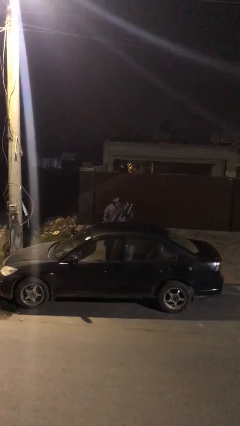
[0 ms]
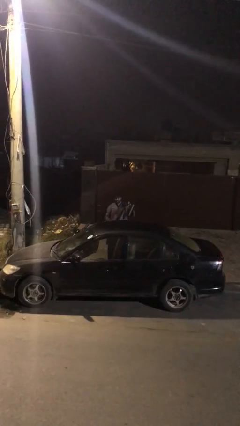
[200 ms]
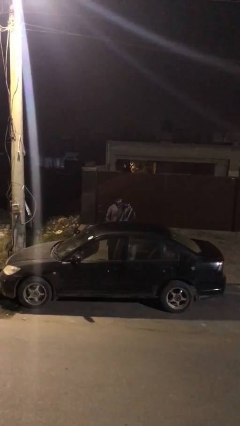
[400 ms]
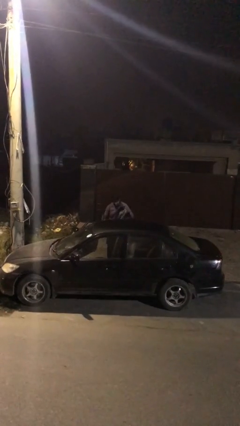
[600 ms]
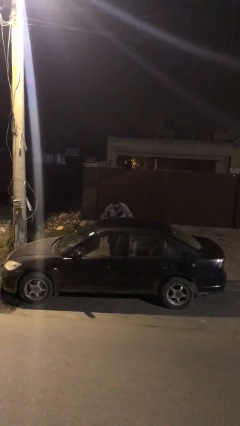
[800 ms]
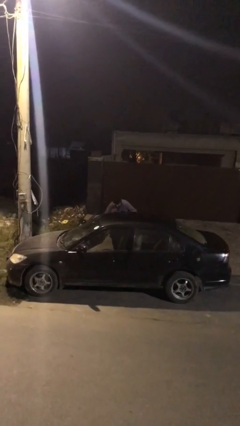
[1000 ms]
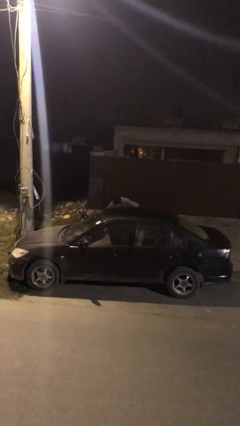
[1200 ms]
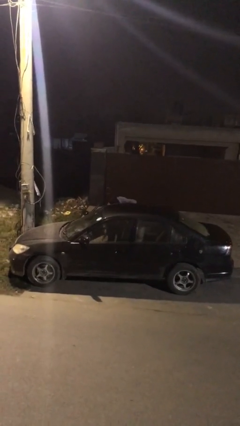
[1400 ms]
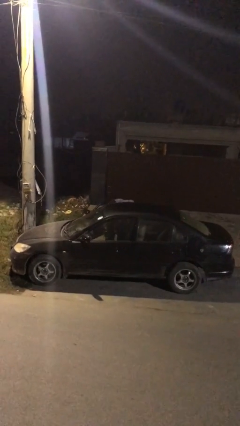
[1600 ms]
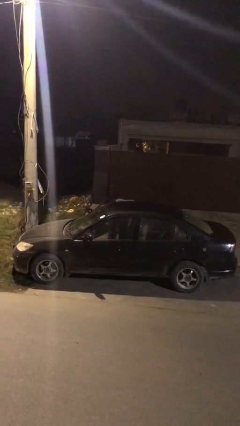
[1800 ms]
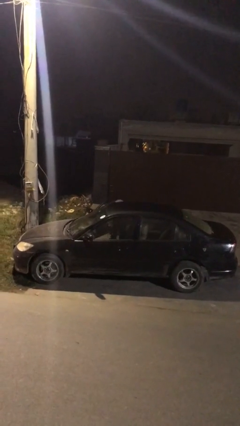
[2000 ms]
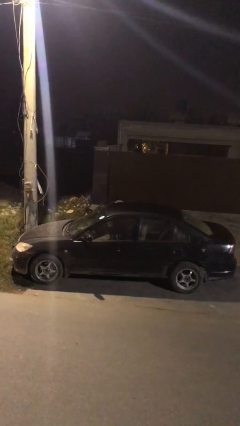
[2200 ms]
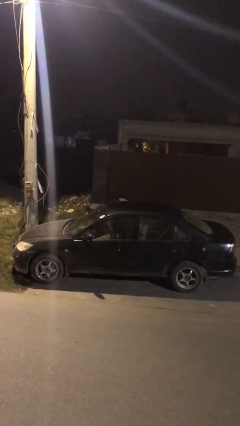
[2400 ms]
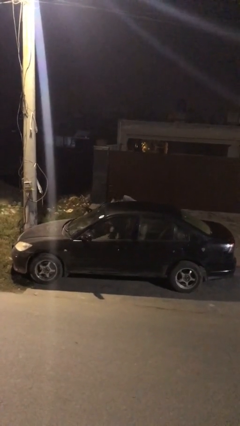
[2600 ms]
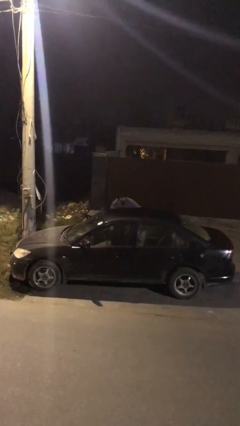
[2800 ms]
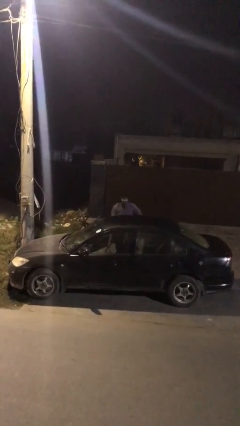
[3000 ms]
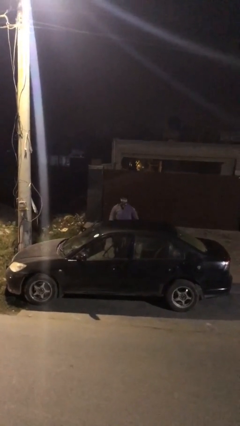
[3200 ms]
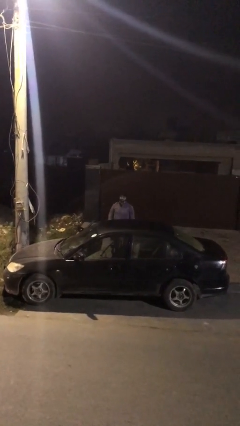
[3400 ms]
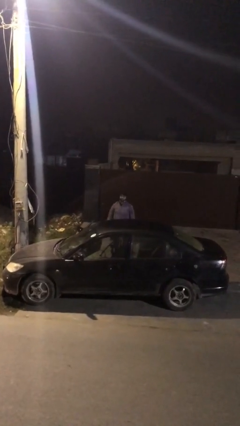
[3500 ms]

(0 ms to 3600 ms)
person loads car

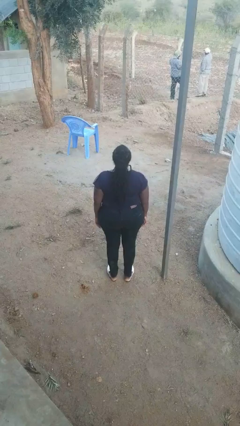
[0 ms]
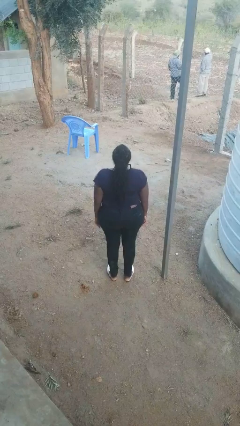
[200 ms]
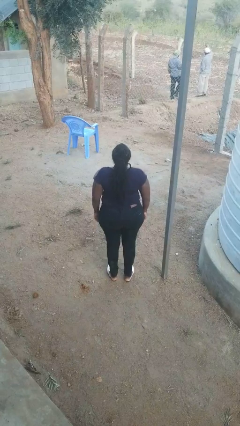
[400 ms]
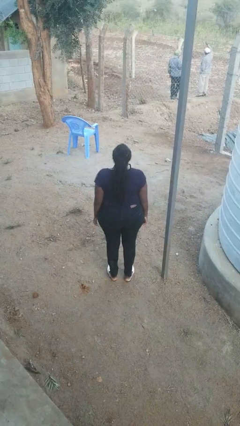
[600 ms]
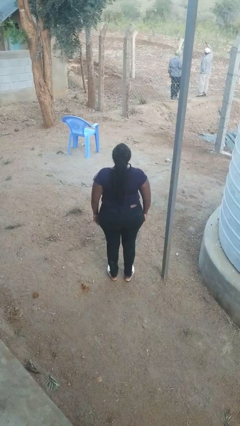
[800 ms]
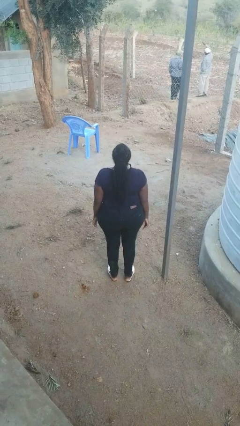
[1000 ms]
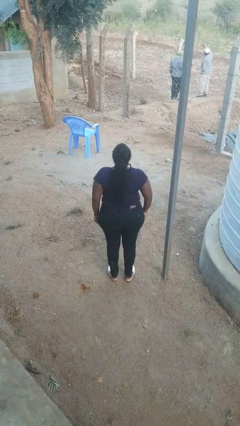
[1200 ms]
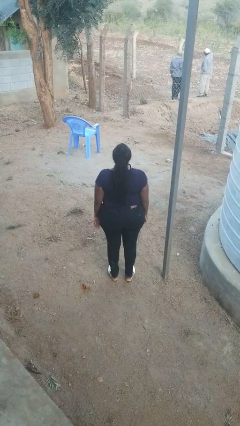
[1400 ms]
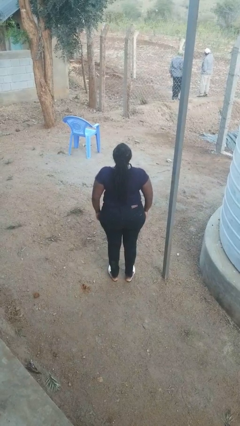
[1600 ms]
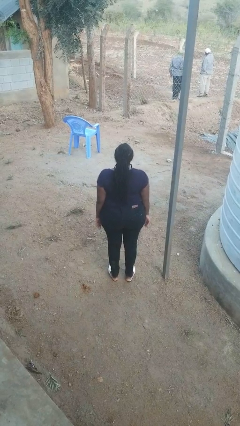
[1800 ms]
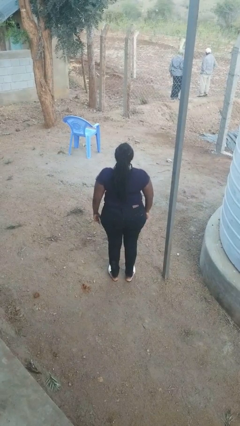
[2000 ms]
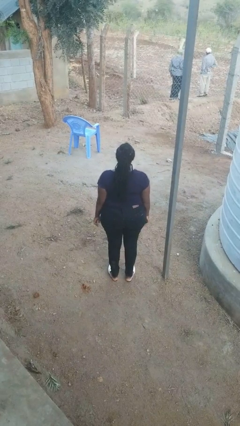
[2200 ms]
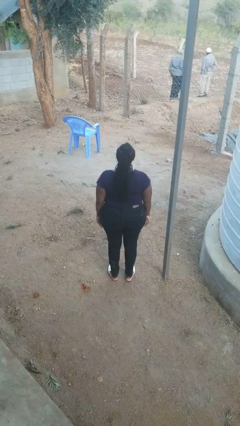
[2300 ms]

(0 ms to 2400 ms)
person shrugs

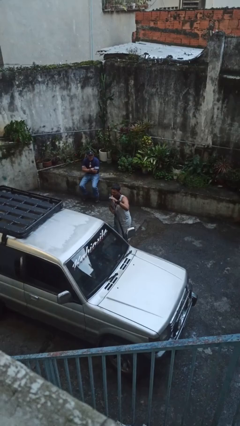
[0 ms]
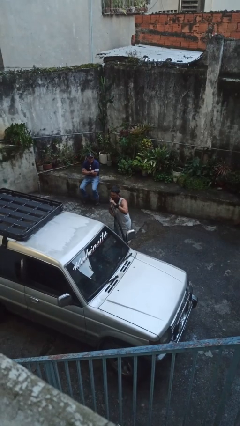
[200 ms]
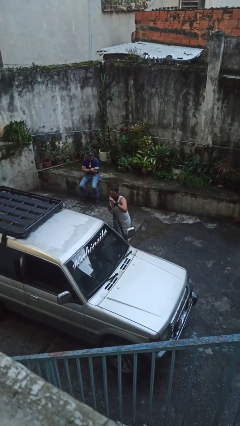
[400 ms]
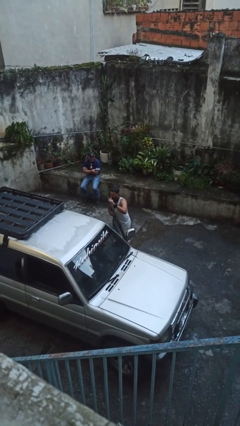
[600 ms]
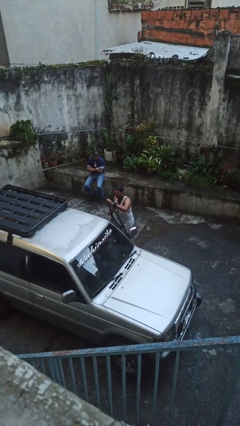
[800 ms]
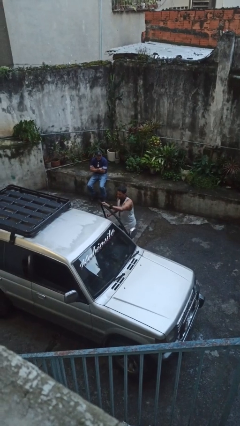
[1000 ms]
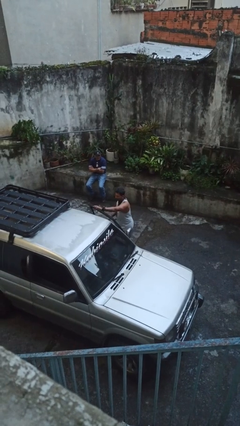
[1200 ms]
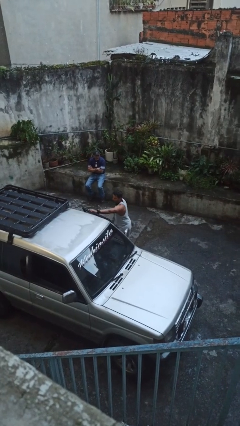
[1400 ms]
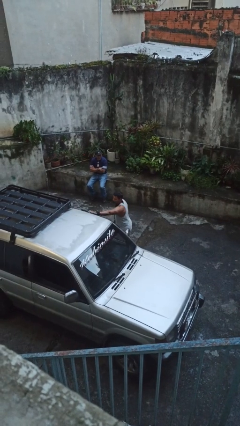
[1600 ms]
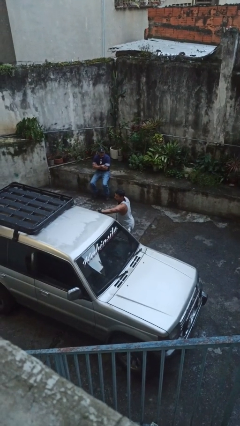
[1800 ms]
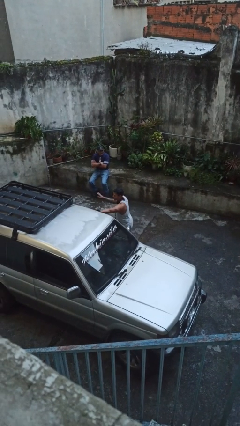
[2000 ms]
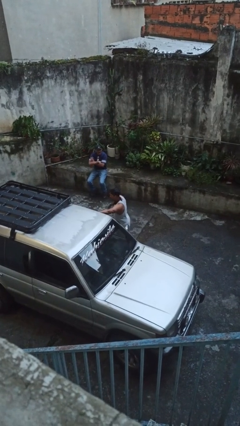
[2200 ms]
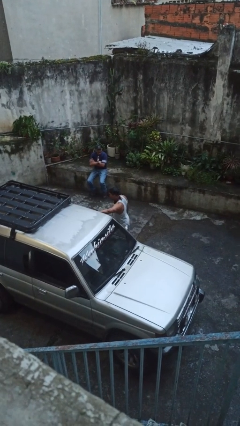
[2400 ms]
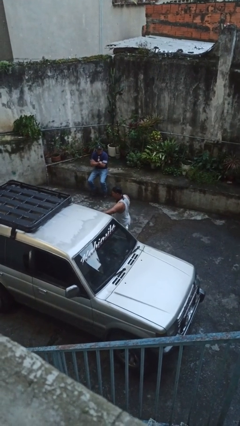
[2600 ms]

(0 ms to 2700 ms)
person closes car door

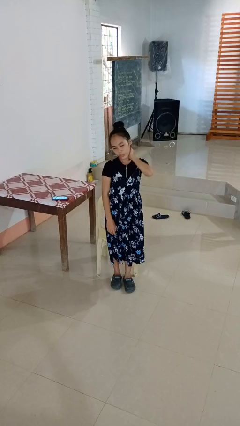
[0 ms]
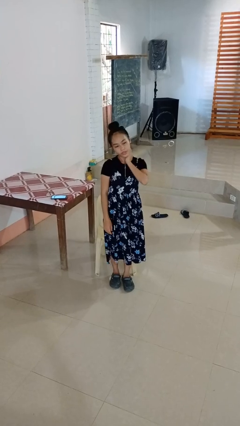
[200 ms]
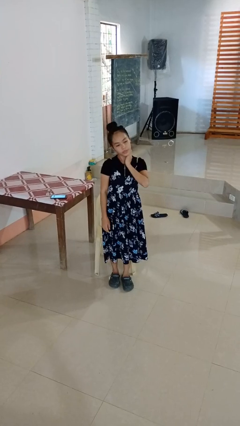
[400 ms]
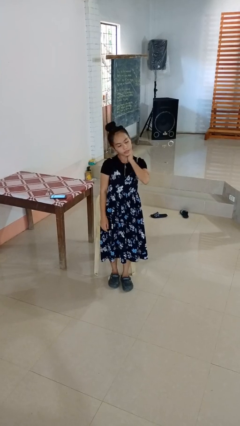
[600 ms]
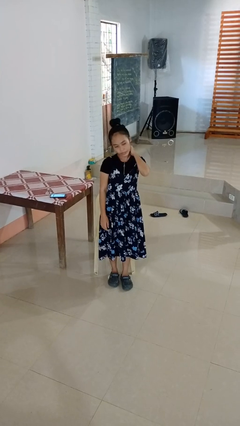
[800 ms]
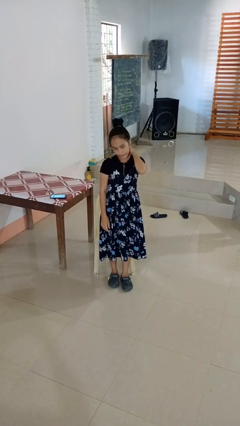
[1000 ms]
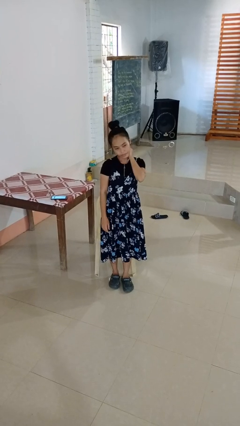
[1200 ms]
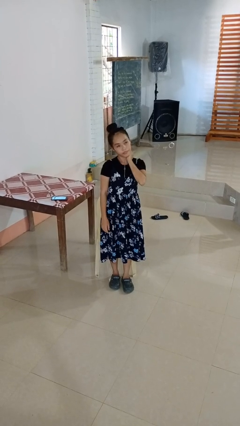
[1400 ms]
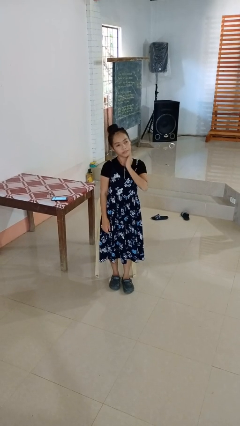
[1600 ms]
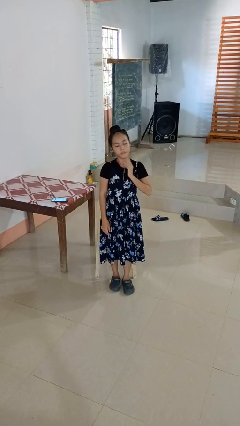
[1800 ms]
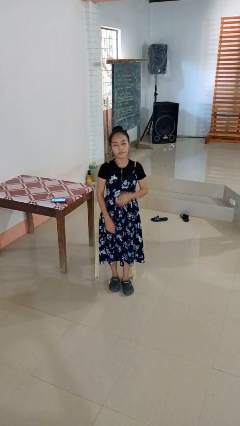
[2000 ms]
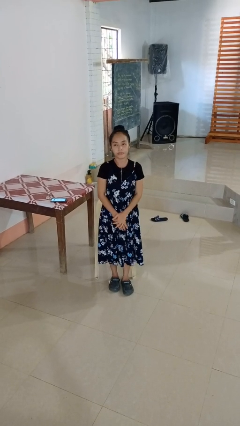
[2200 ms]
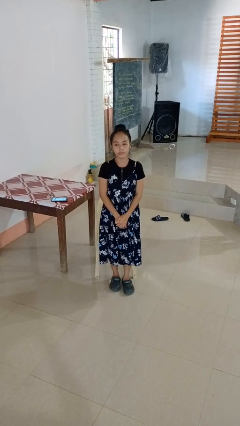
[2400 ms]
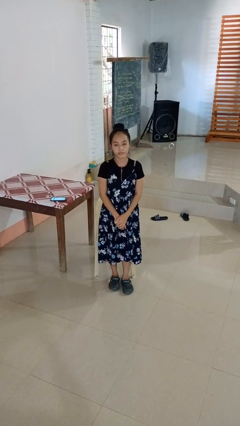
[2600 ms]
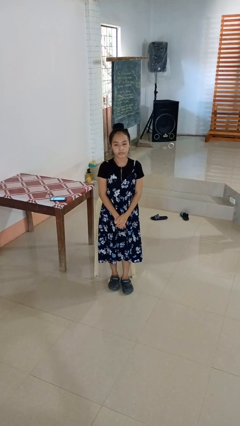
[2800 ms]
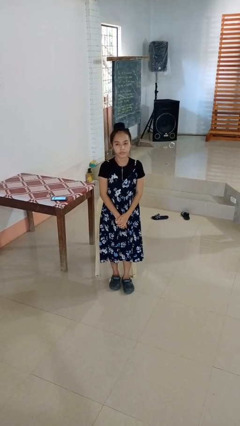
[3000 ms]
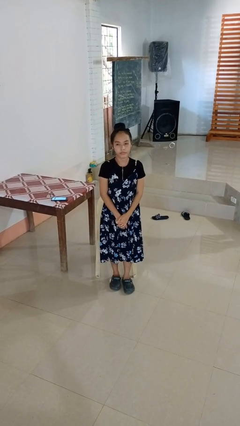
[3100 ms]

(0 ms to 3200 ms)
person rubs neck

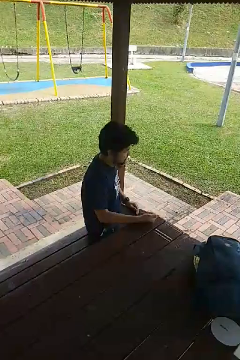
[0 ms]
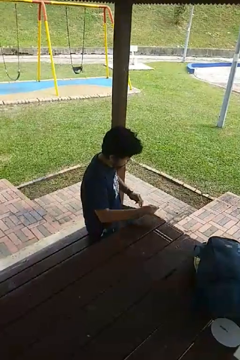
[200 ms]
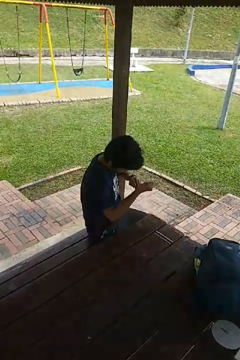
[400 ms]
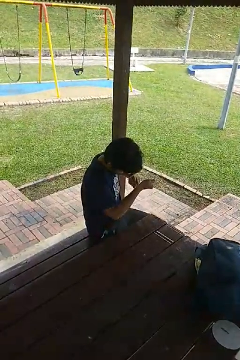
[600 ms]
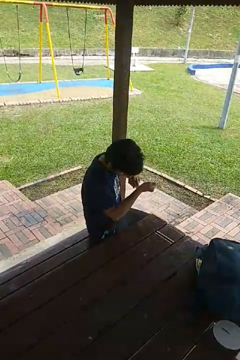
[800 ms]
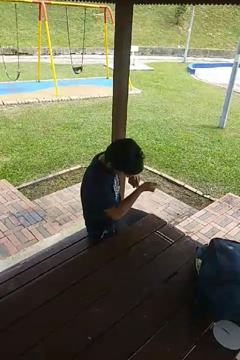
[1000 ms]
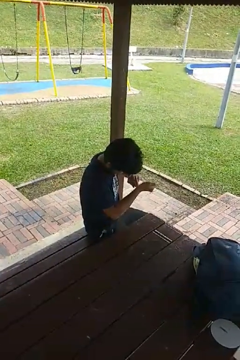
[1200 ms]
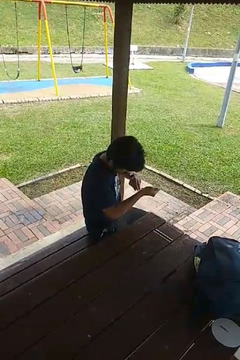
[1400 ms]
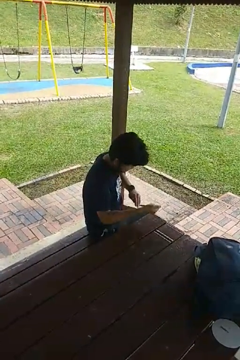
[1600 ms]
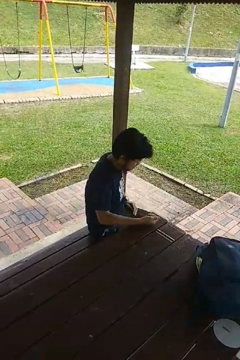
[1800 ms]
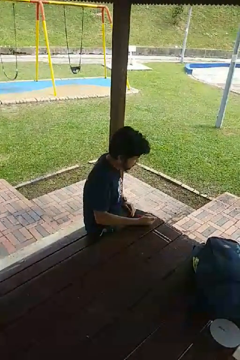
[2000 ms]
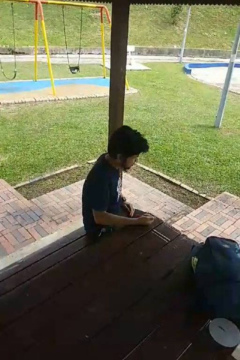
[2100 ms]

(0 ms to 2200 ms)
person paints fingernails

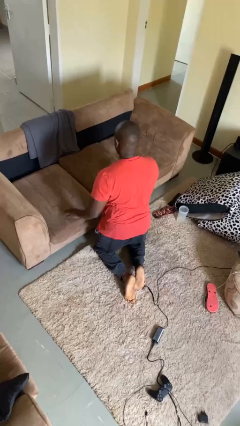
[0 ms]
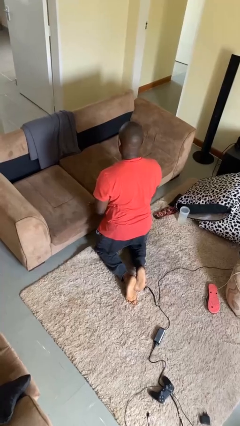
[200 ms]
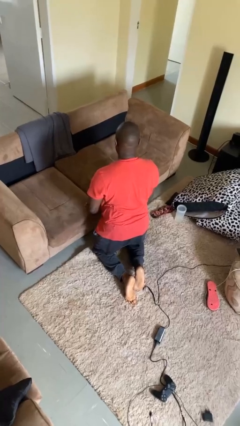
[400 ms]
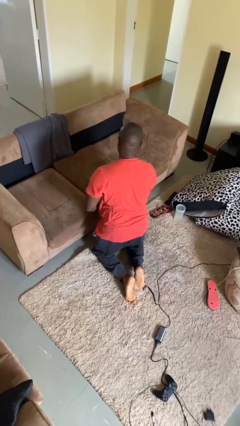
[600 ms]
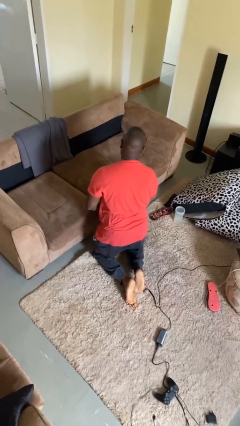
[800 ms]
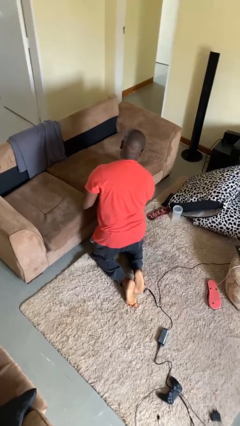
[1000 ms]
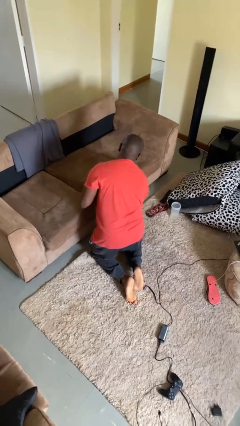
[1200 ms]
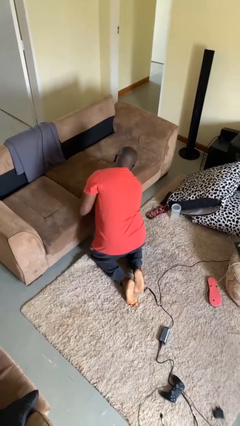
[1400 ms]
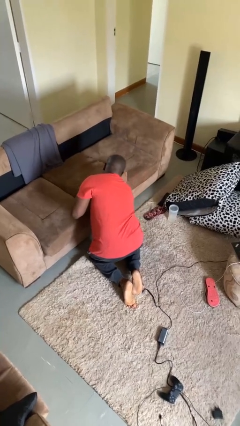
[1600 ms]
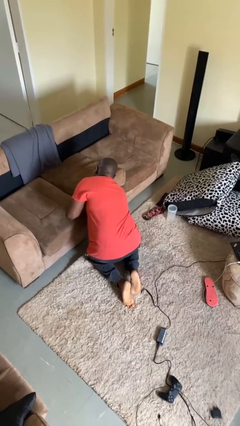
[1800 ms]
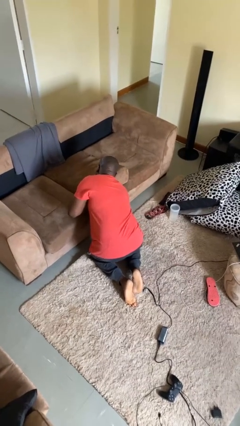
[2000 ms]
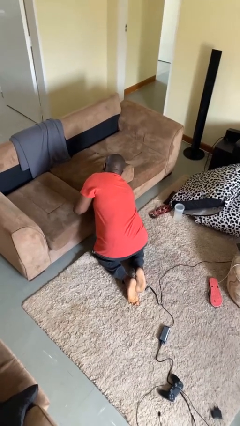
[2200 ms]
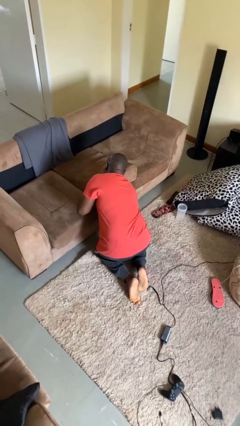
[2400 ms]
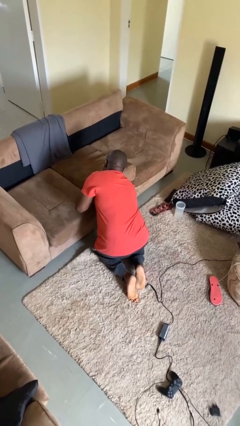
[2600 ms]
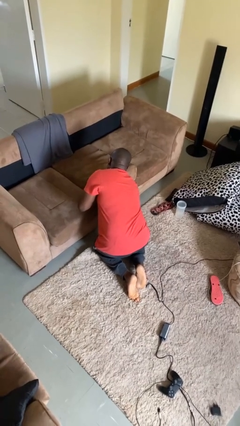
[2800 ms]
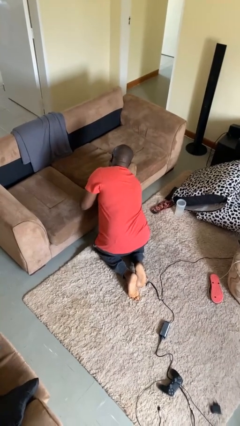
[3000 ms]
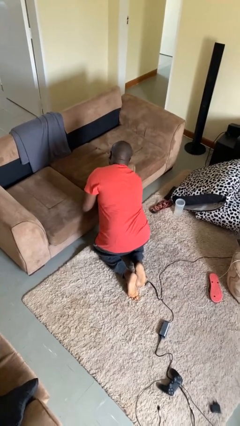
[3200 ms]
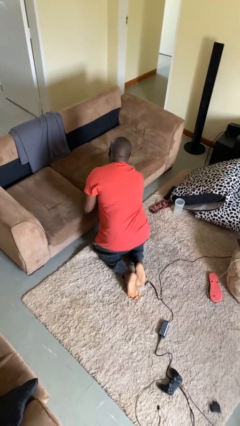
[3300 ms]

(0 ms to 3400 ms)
person searches under couch

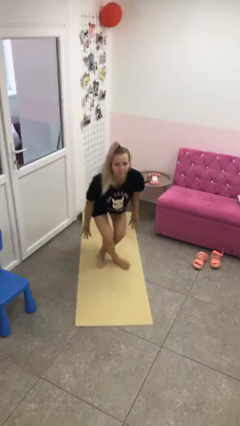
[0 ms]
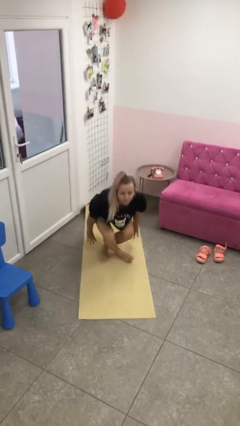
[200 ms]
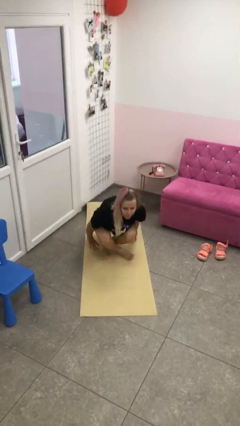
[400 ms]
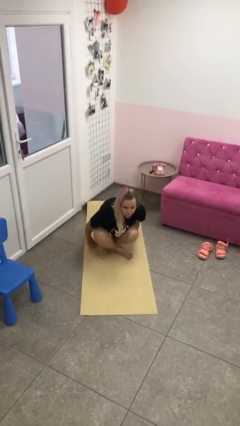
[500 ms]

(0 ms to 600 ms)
person sits crisscross
